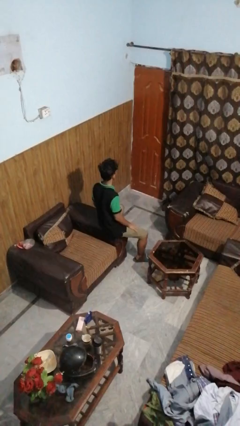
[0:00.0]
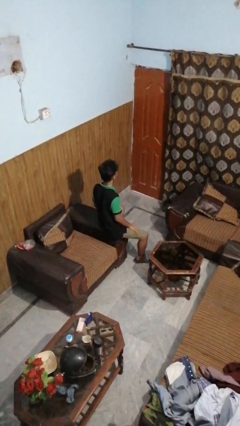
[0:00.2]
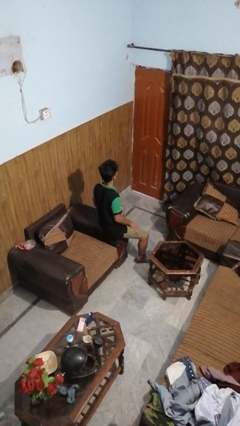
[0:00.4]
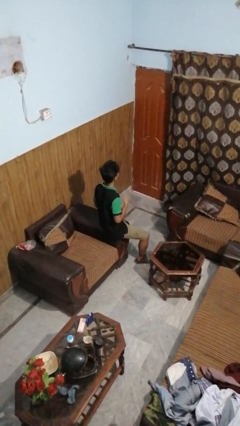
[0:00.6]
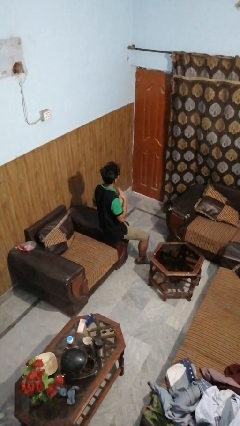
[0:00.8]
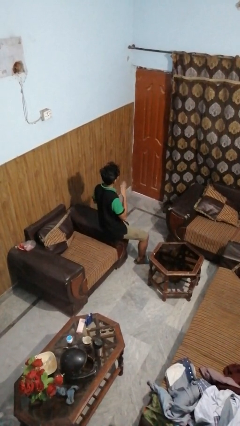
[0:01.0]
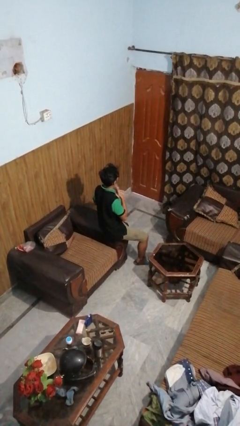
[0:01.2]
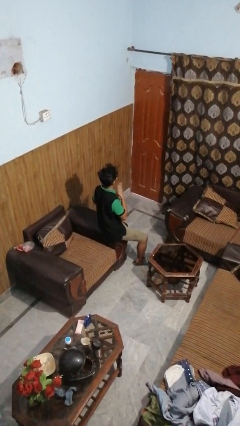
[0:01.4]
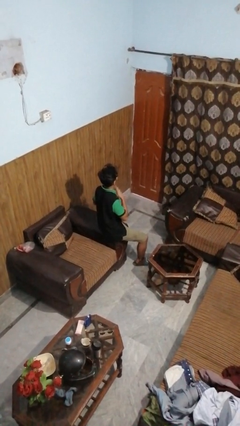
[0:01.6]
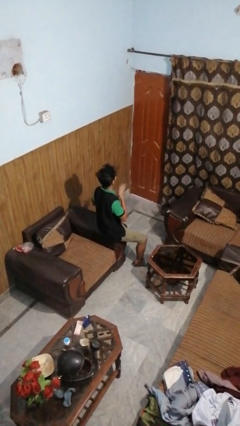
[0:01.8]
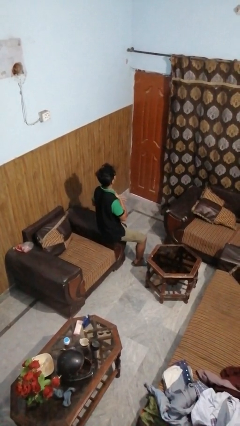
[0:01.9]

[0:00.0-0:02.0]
person drums on chest

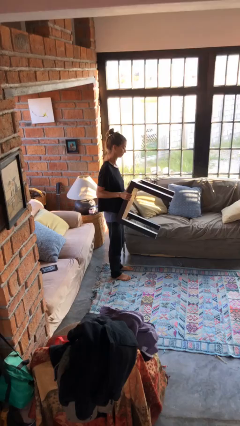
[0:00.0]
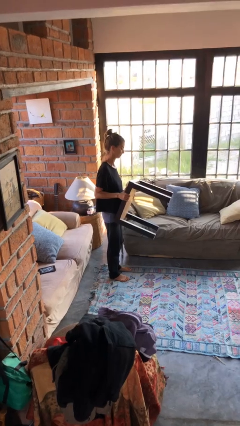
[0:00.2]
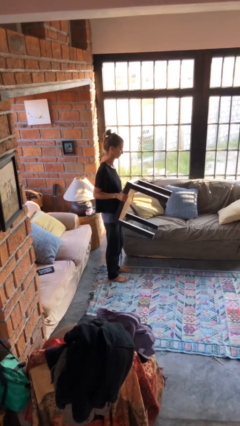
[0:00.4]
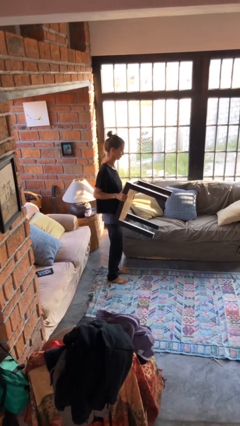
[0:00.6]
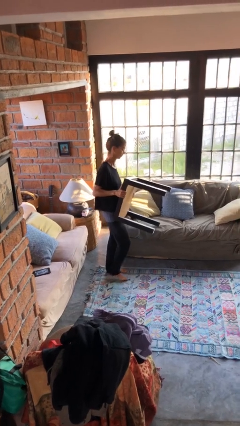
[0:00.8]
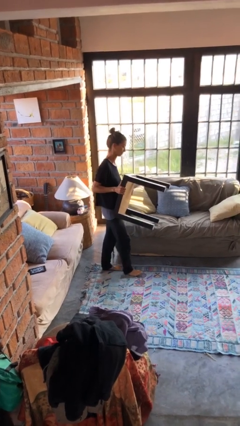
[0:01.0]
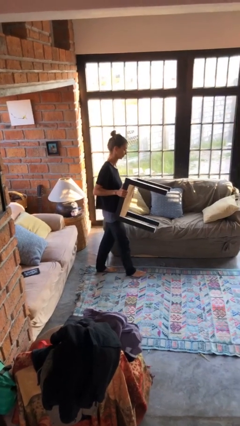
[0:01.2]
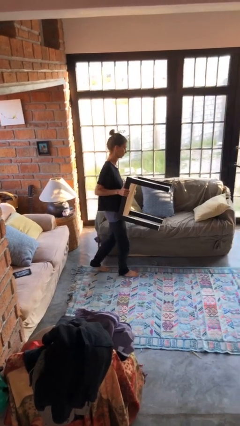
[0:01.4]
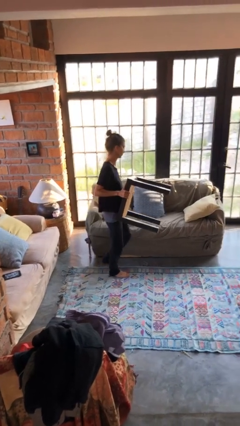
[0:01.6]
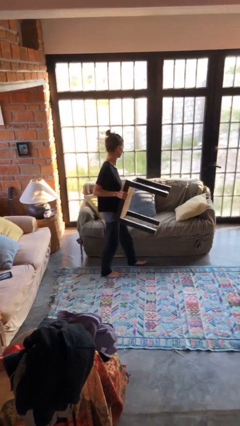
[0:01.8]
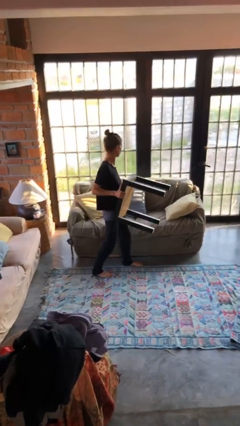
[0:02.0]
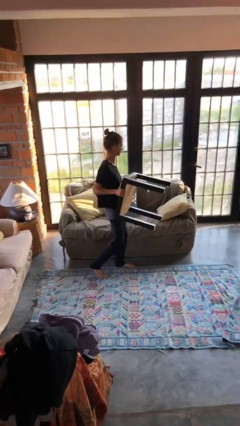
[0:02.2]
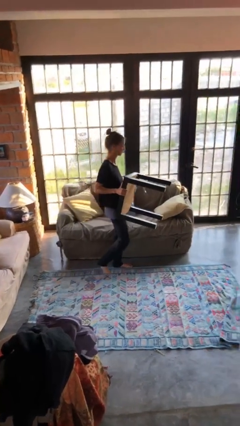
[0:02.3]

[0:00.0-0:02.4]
person carries furniture

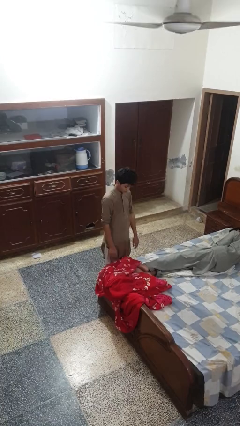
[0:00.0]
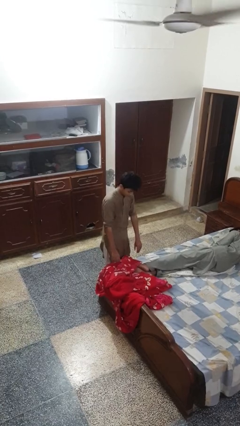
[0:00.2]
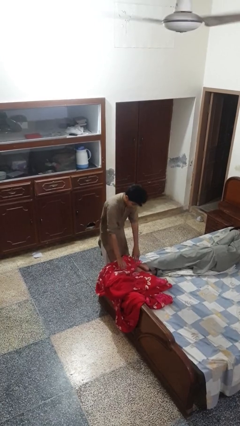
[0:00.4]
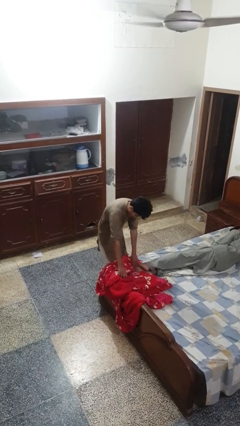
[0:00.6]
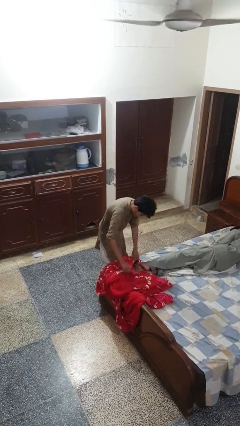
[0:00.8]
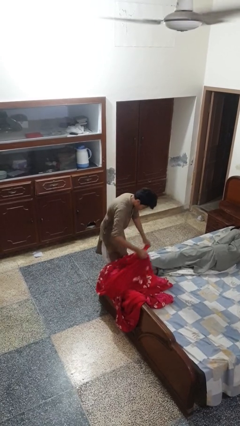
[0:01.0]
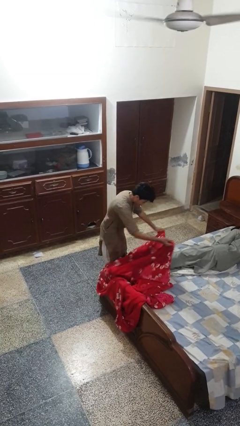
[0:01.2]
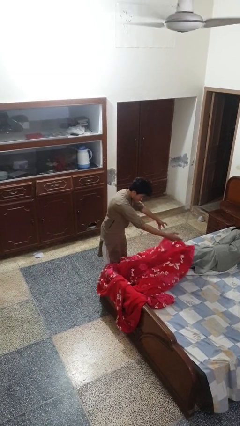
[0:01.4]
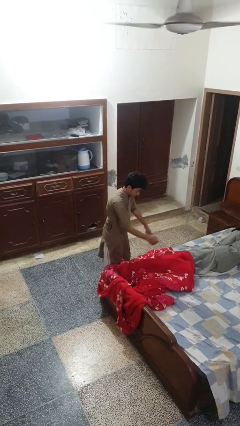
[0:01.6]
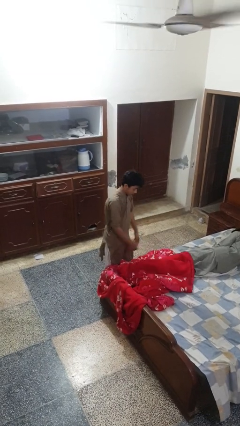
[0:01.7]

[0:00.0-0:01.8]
person covers friend with blanket

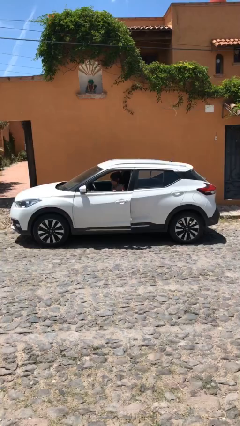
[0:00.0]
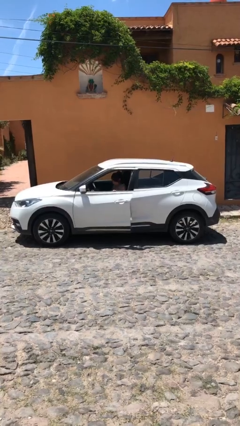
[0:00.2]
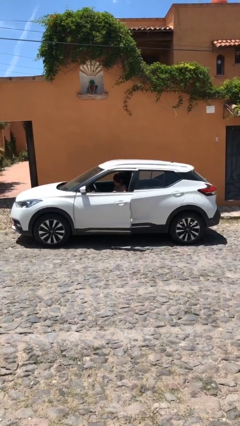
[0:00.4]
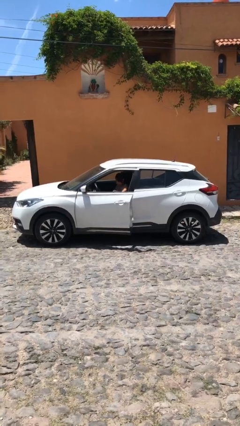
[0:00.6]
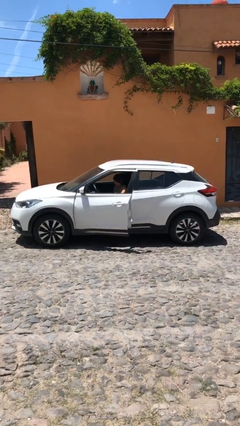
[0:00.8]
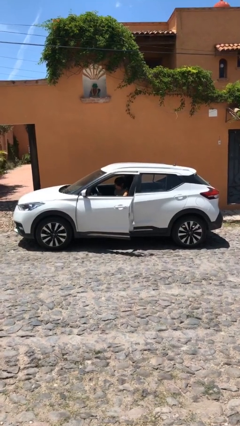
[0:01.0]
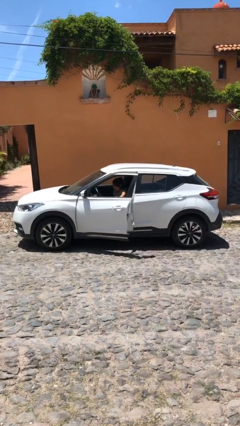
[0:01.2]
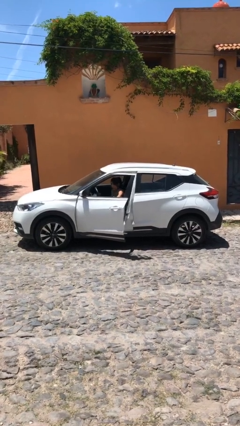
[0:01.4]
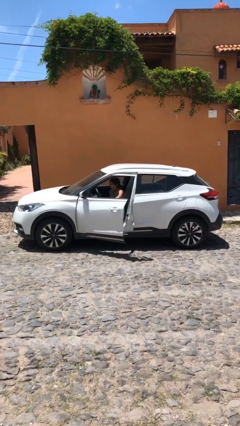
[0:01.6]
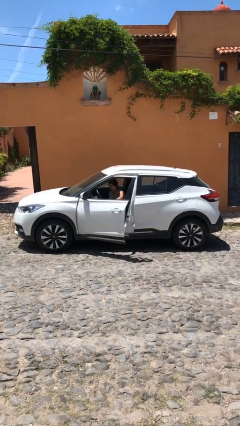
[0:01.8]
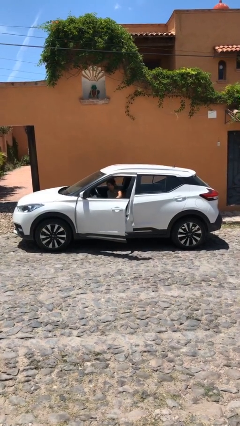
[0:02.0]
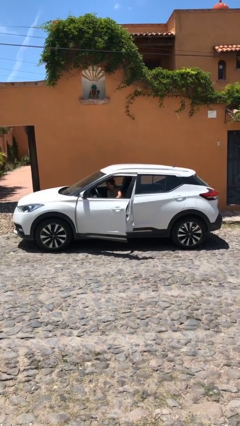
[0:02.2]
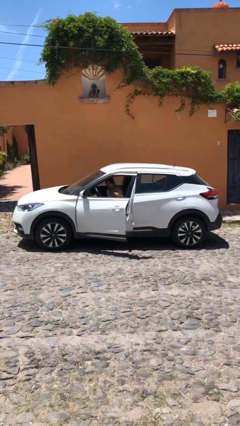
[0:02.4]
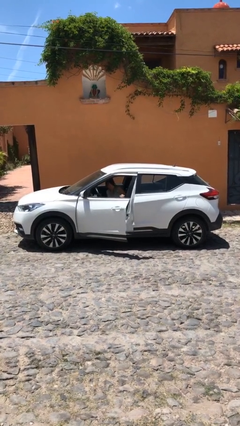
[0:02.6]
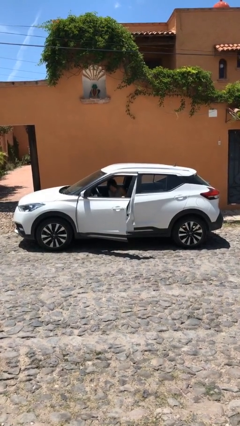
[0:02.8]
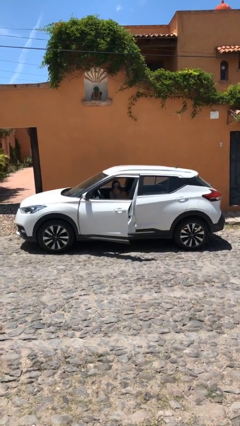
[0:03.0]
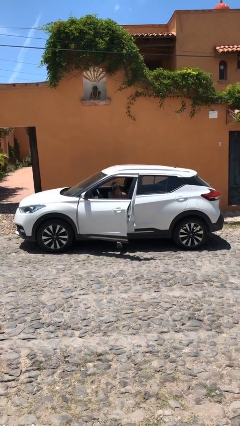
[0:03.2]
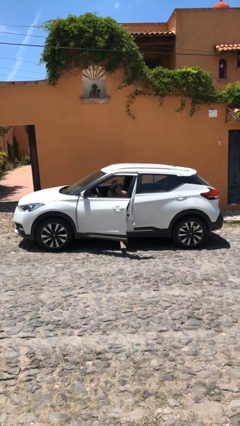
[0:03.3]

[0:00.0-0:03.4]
person opens car door

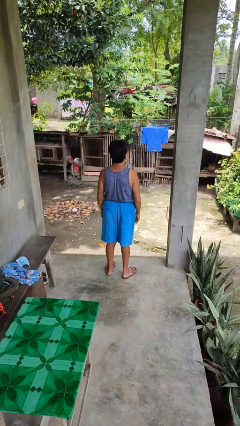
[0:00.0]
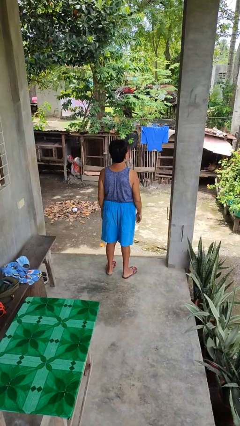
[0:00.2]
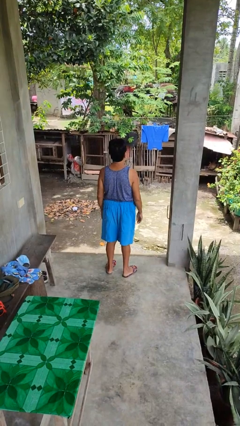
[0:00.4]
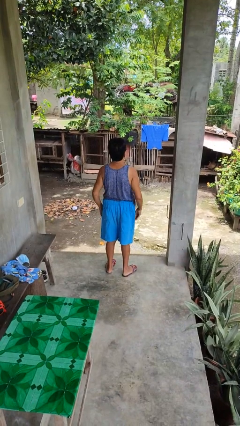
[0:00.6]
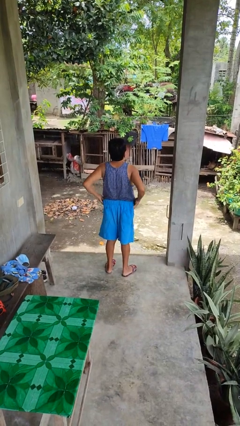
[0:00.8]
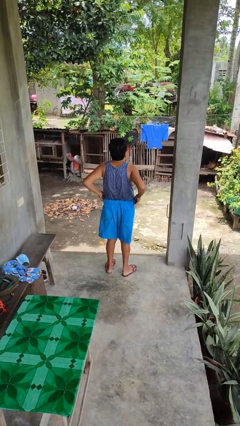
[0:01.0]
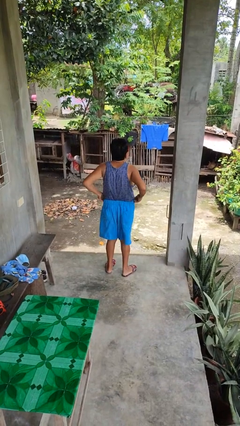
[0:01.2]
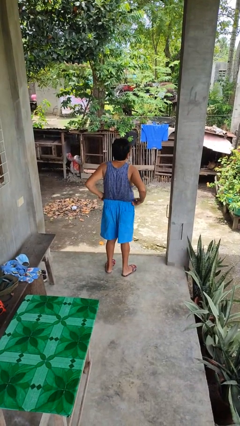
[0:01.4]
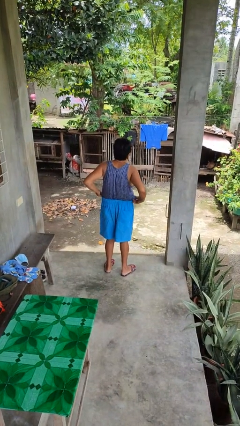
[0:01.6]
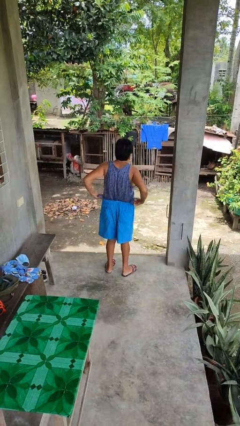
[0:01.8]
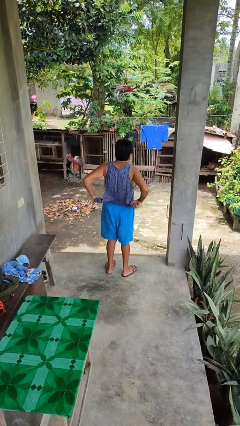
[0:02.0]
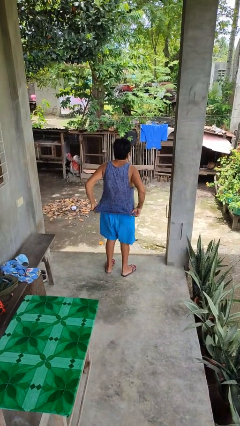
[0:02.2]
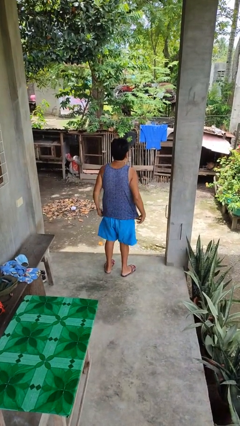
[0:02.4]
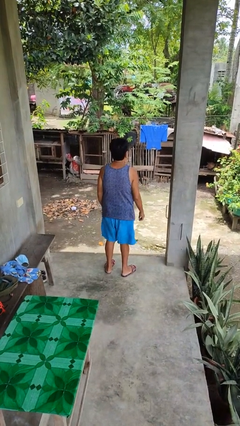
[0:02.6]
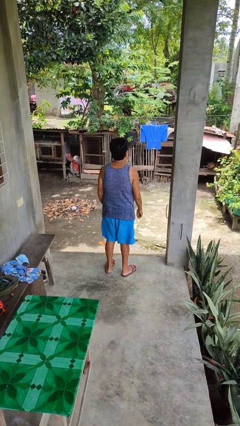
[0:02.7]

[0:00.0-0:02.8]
person untucks shirt

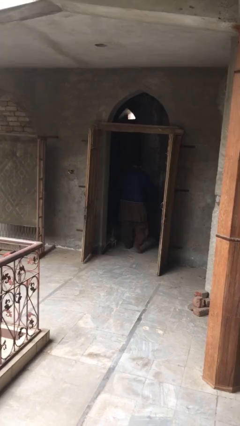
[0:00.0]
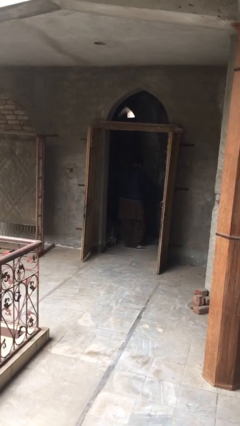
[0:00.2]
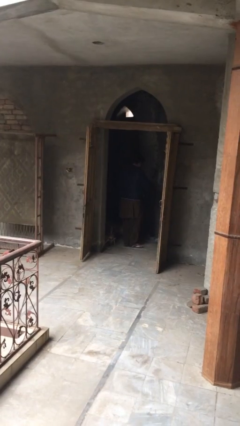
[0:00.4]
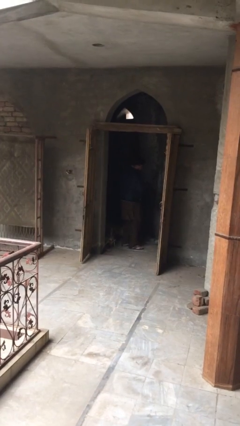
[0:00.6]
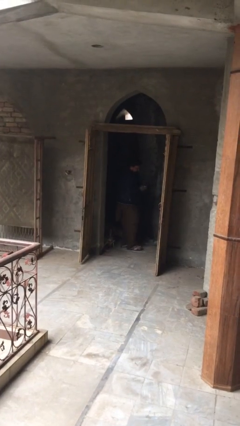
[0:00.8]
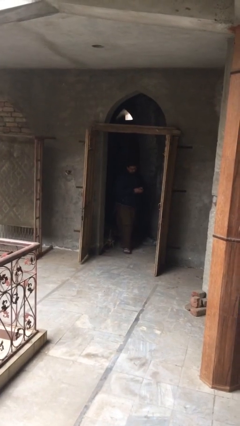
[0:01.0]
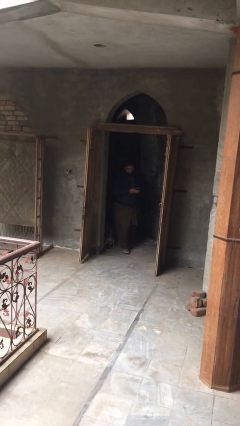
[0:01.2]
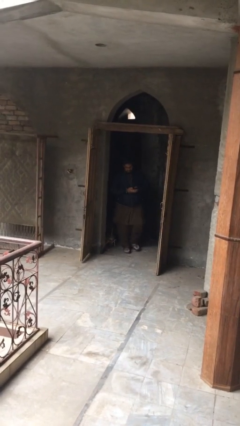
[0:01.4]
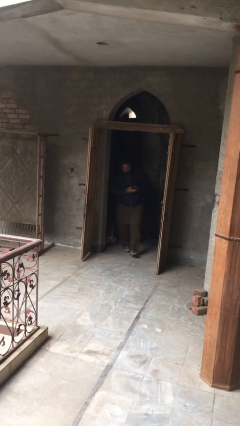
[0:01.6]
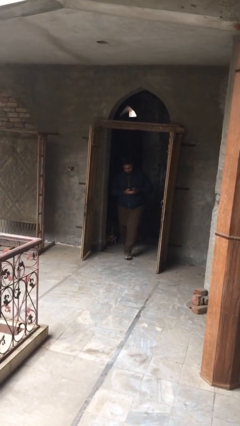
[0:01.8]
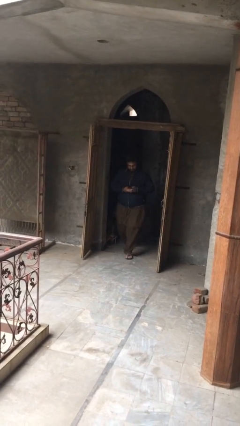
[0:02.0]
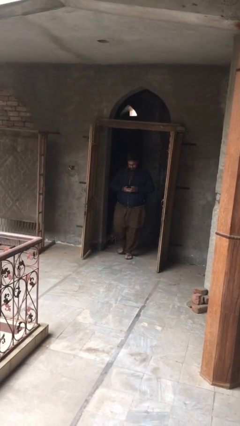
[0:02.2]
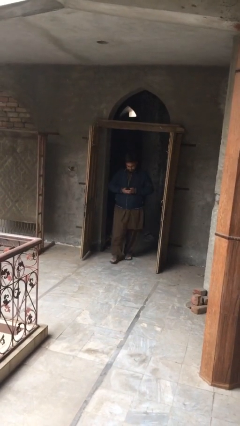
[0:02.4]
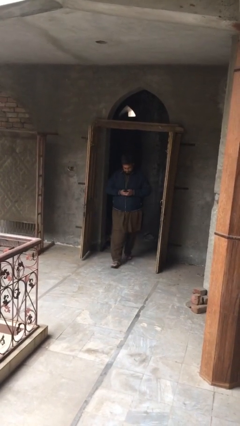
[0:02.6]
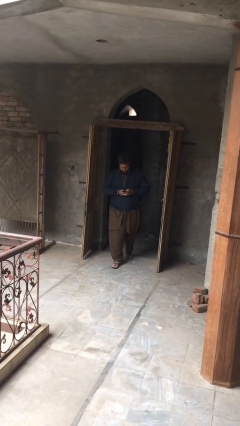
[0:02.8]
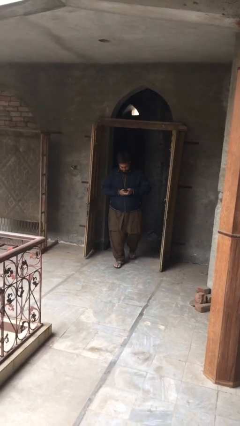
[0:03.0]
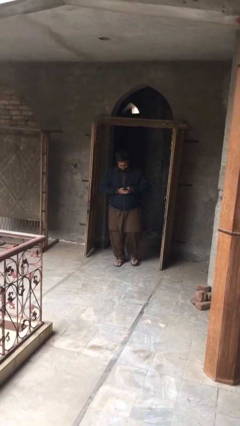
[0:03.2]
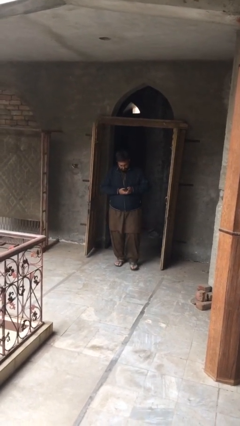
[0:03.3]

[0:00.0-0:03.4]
person enters scene through structure

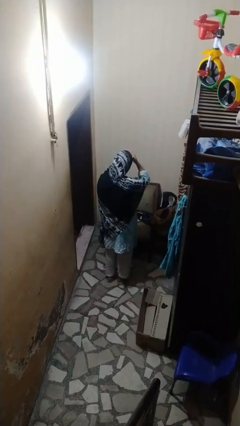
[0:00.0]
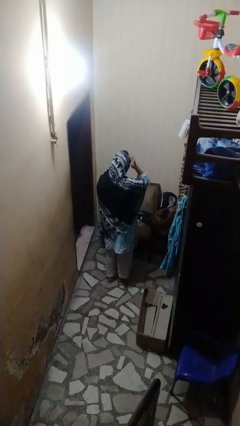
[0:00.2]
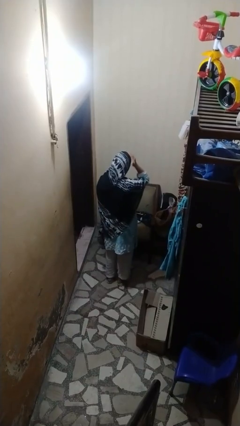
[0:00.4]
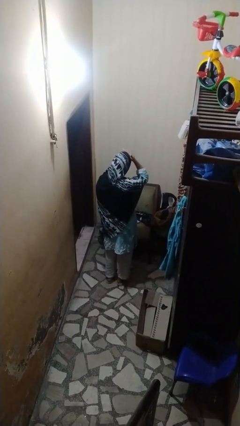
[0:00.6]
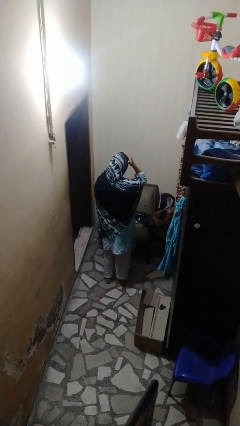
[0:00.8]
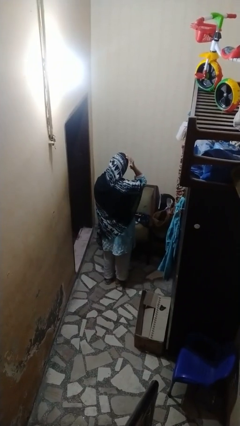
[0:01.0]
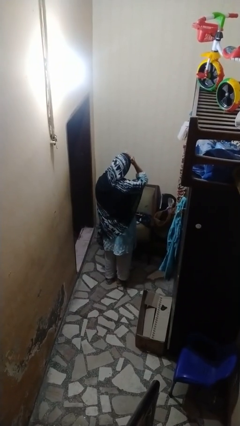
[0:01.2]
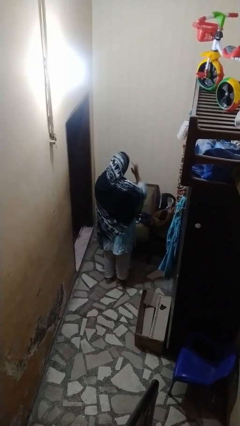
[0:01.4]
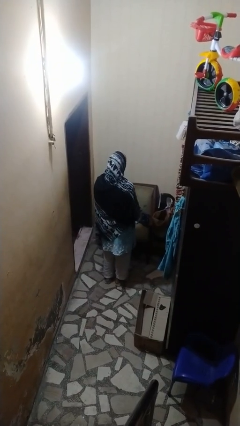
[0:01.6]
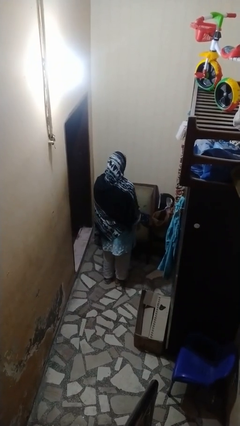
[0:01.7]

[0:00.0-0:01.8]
person pats head
